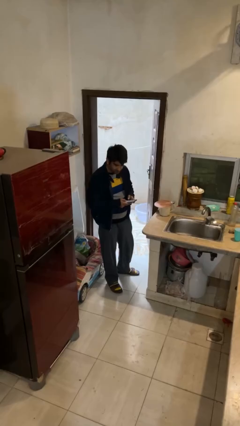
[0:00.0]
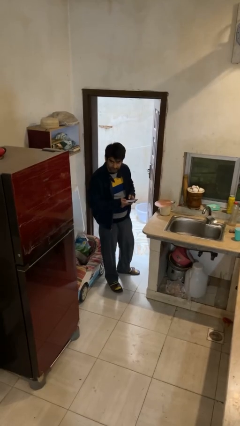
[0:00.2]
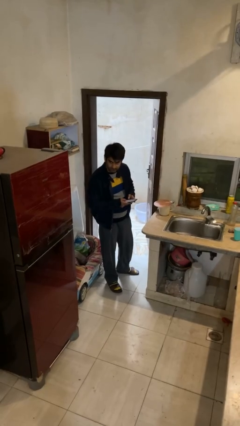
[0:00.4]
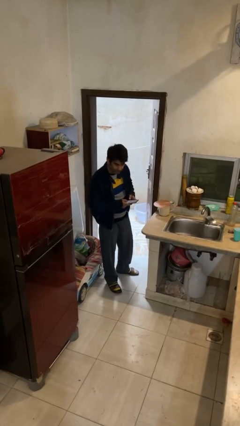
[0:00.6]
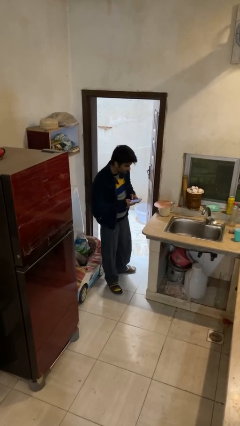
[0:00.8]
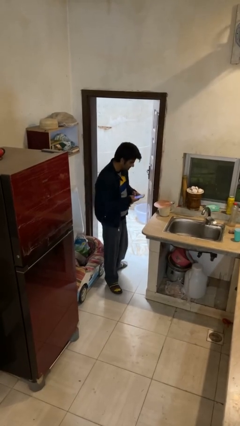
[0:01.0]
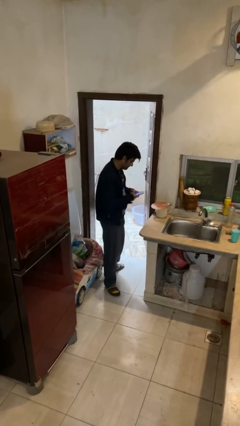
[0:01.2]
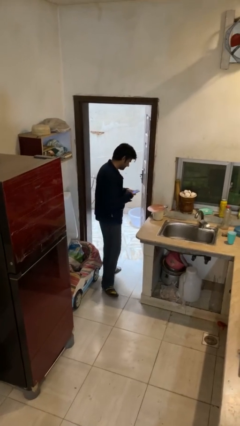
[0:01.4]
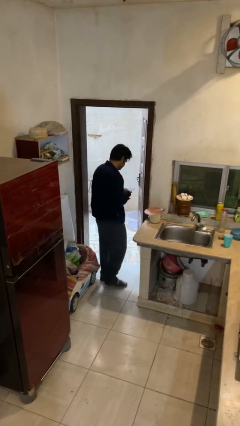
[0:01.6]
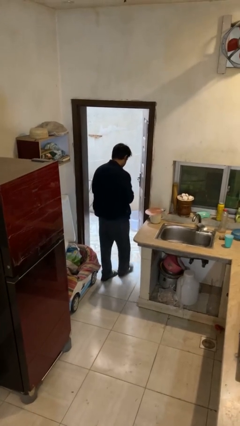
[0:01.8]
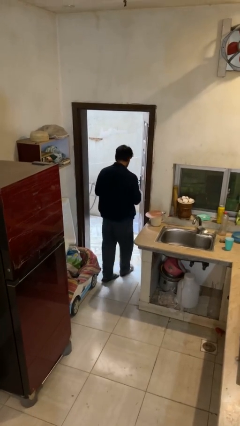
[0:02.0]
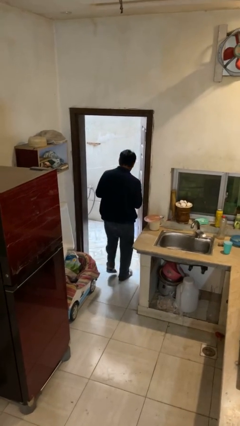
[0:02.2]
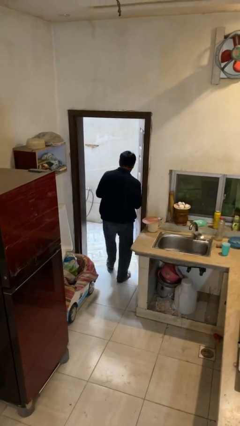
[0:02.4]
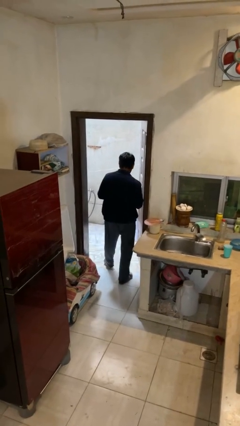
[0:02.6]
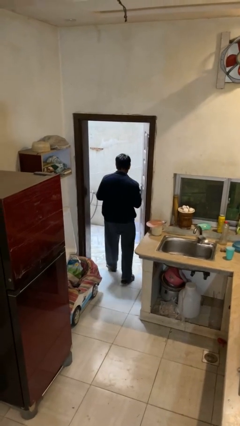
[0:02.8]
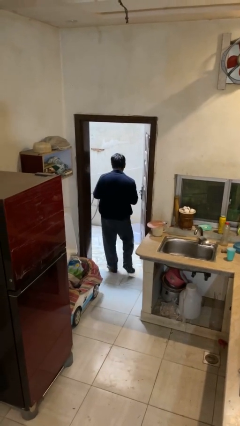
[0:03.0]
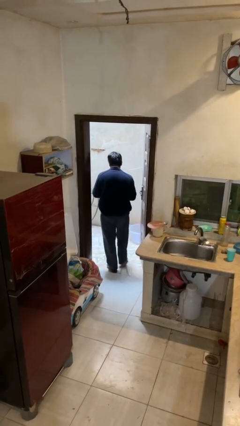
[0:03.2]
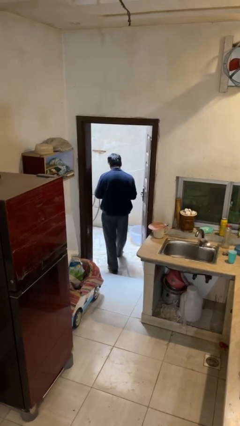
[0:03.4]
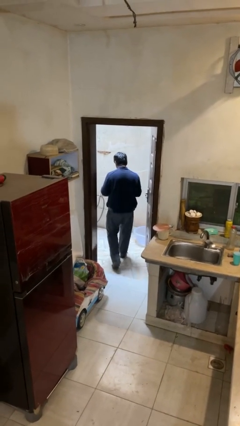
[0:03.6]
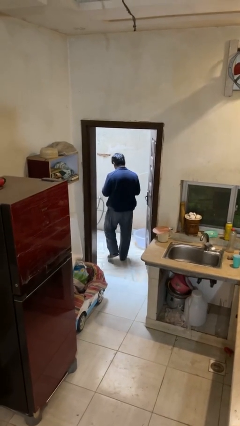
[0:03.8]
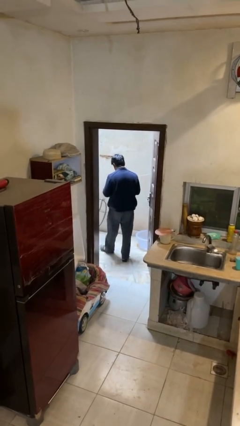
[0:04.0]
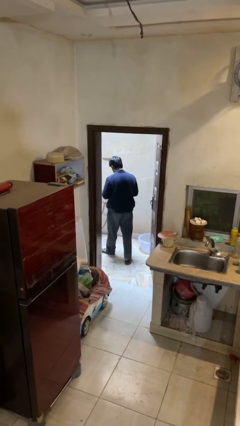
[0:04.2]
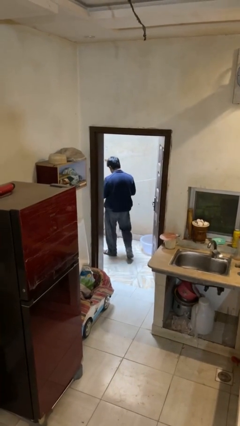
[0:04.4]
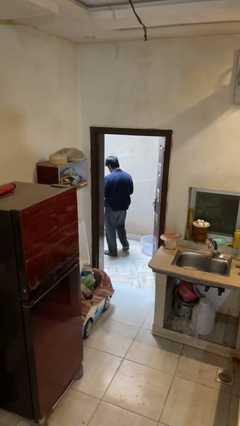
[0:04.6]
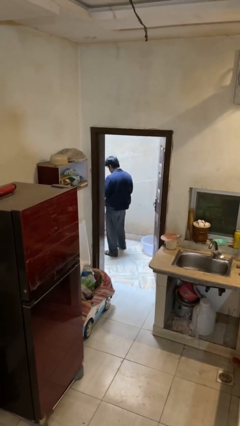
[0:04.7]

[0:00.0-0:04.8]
person exits scene through structure

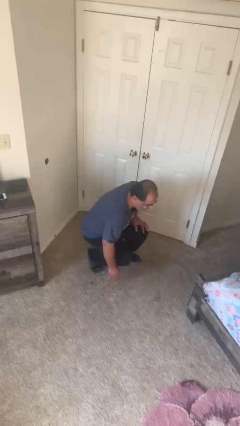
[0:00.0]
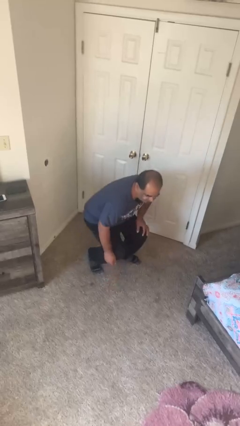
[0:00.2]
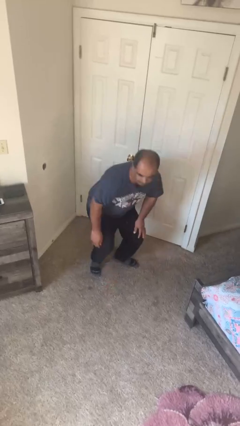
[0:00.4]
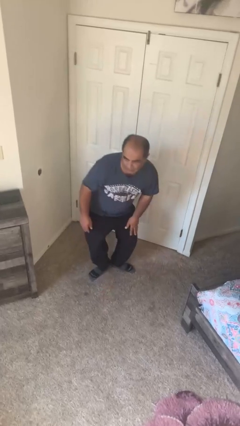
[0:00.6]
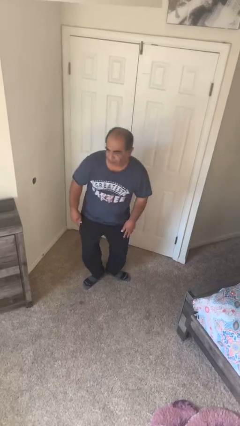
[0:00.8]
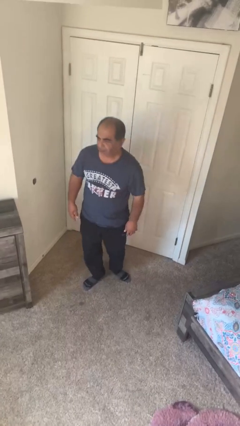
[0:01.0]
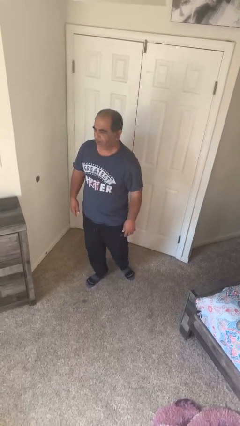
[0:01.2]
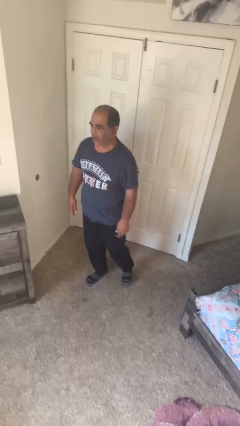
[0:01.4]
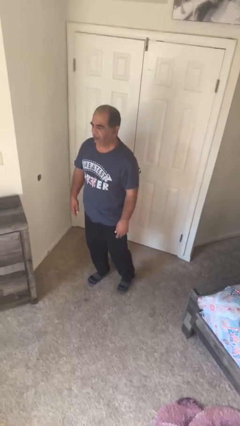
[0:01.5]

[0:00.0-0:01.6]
person stands up

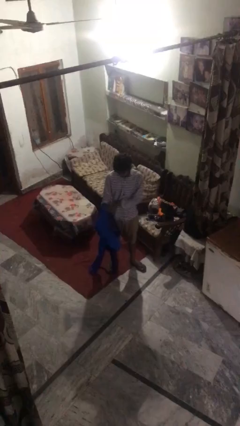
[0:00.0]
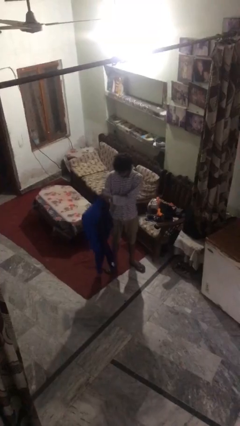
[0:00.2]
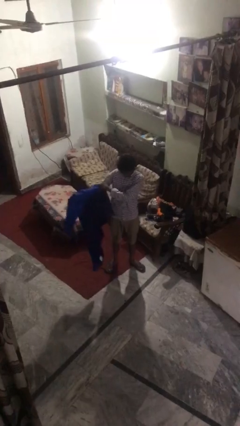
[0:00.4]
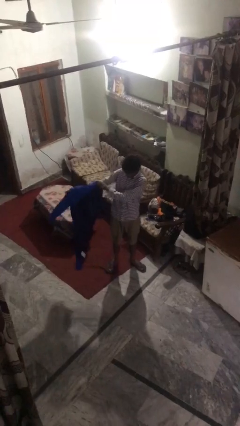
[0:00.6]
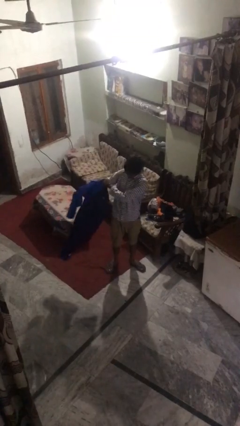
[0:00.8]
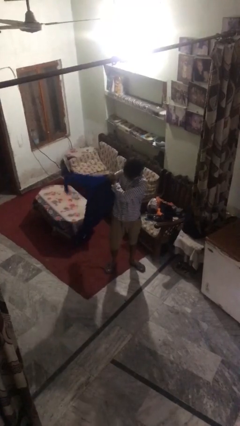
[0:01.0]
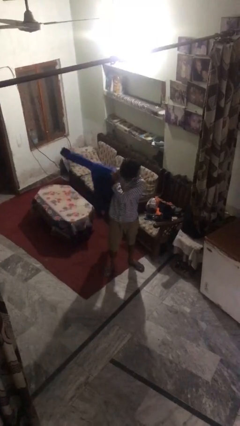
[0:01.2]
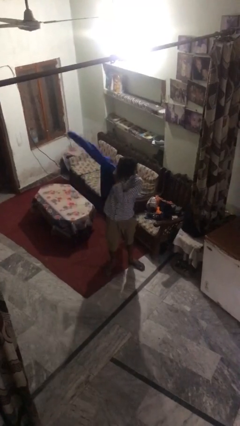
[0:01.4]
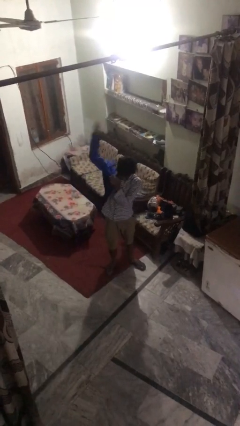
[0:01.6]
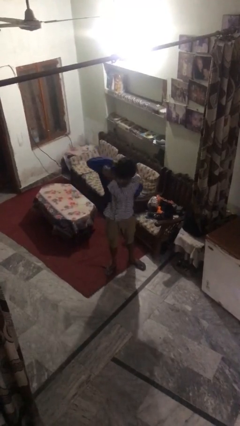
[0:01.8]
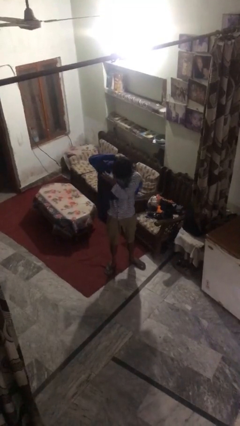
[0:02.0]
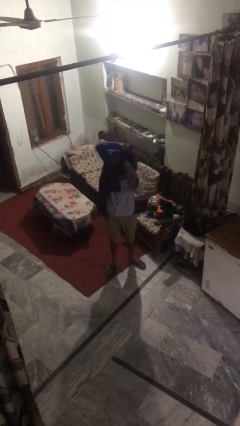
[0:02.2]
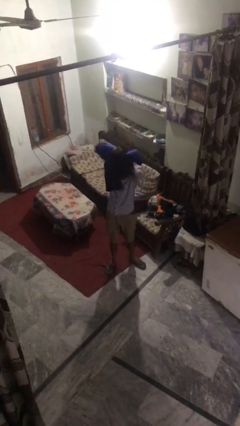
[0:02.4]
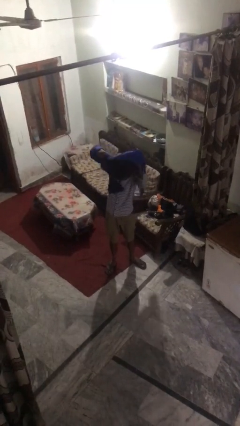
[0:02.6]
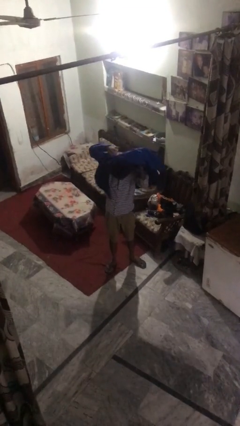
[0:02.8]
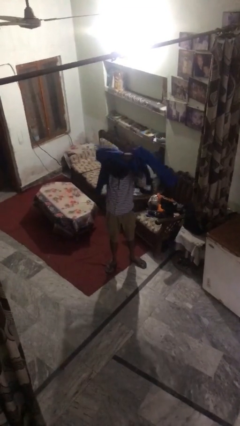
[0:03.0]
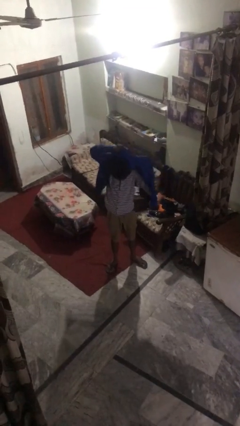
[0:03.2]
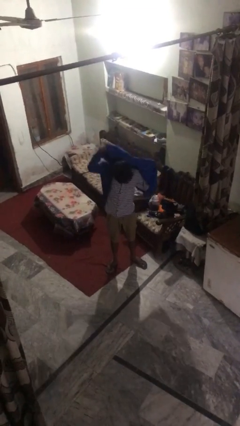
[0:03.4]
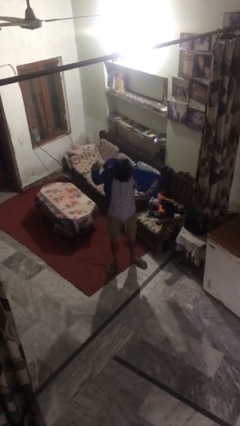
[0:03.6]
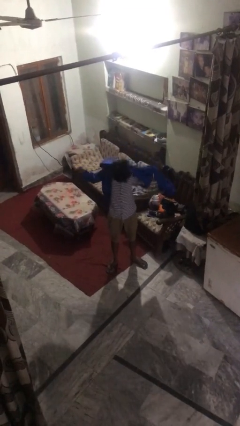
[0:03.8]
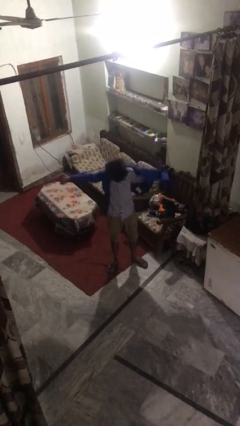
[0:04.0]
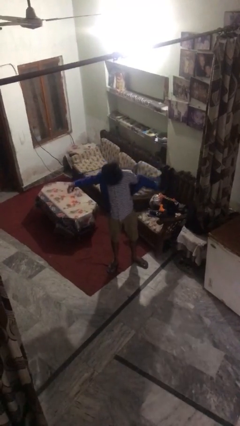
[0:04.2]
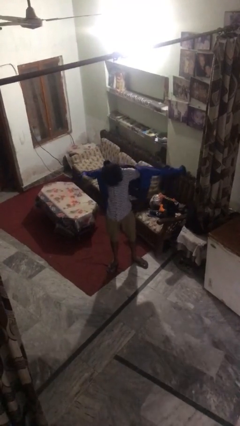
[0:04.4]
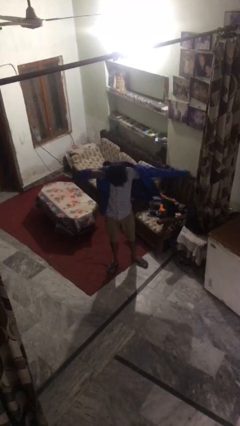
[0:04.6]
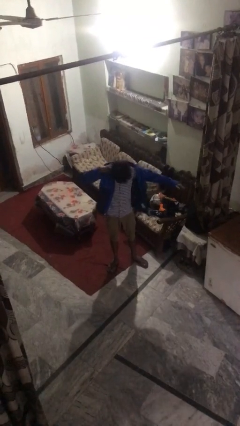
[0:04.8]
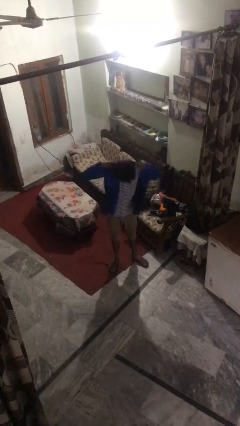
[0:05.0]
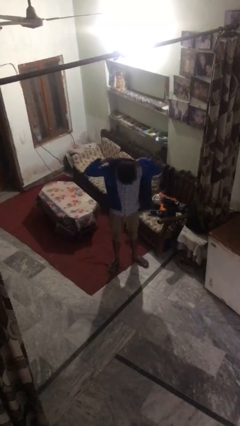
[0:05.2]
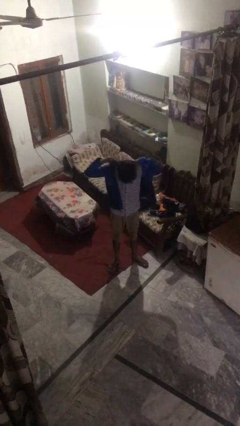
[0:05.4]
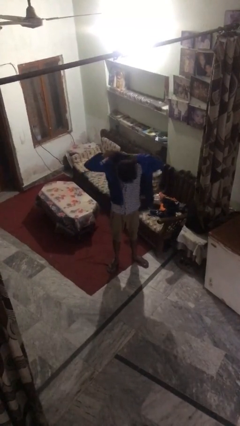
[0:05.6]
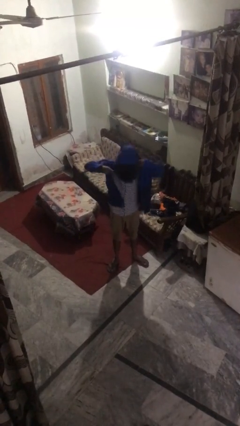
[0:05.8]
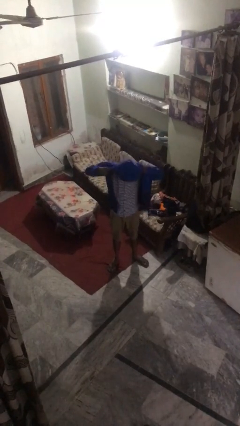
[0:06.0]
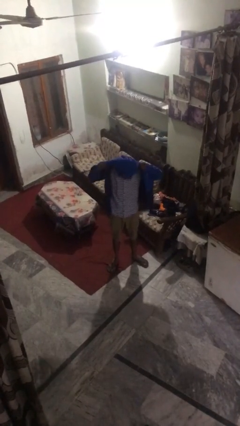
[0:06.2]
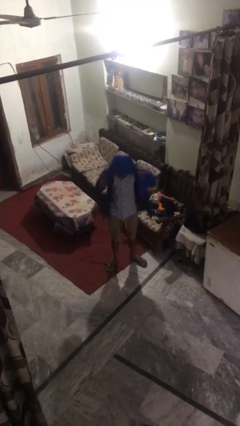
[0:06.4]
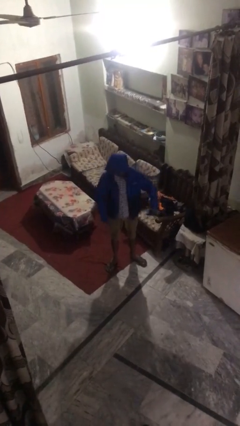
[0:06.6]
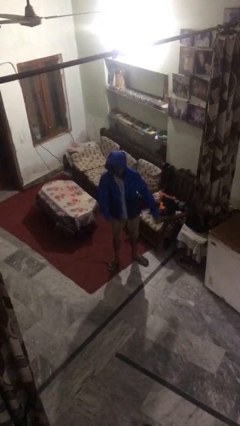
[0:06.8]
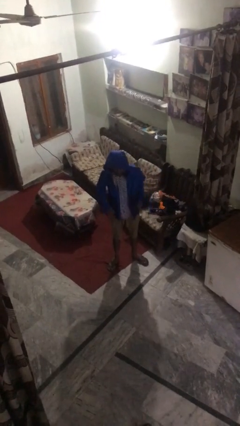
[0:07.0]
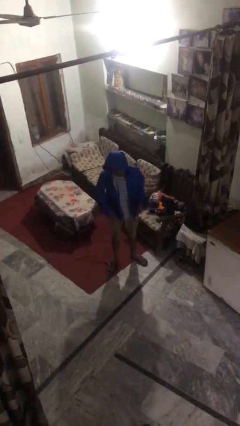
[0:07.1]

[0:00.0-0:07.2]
person puts on hoodie

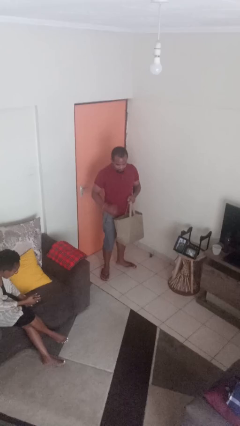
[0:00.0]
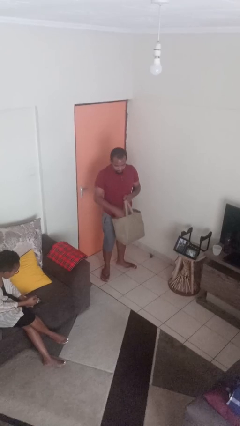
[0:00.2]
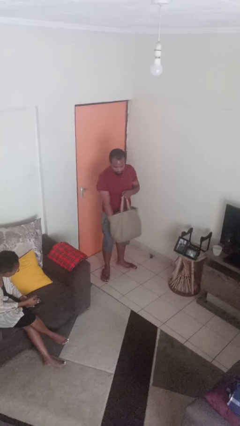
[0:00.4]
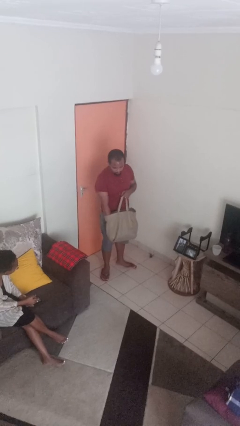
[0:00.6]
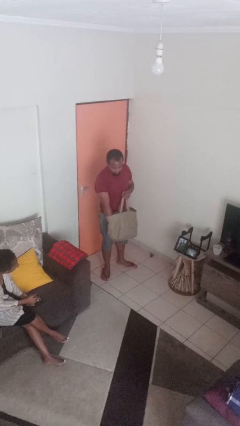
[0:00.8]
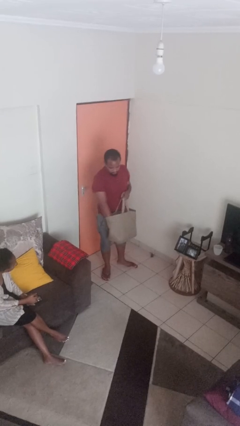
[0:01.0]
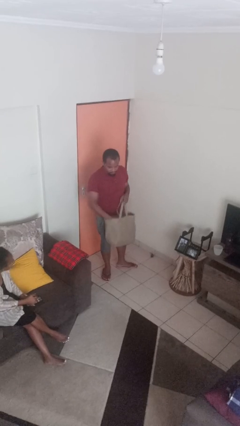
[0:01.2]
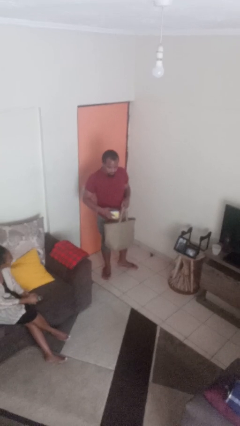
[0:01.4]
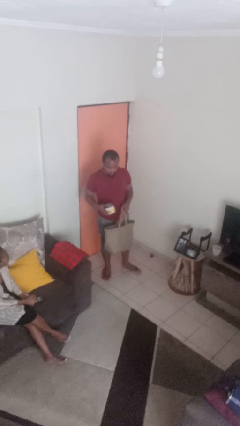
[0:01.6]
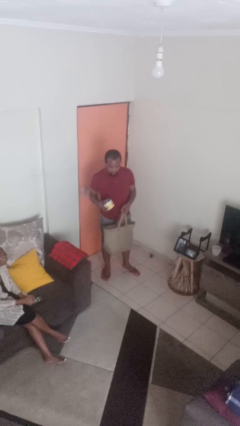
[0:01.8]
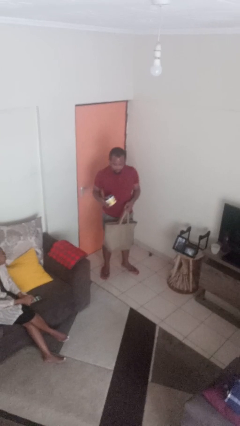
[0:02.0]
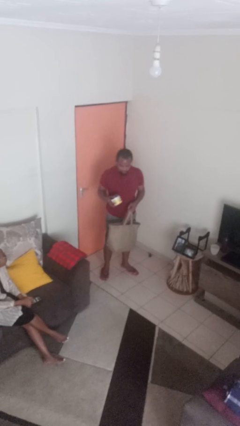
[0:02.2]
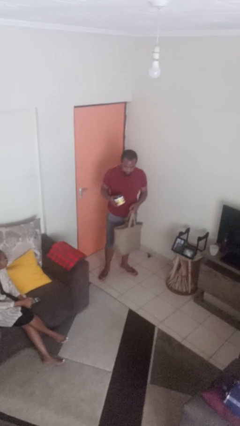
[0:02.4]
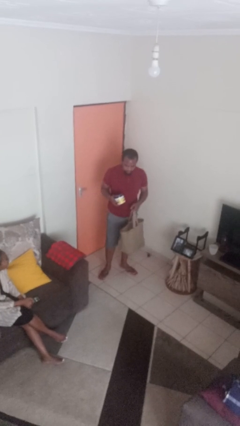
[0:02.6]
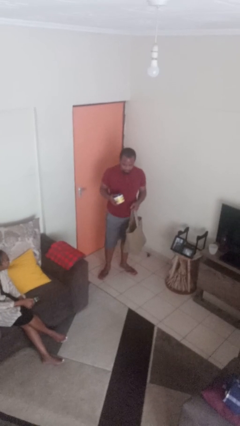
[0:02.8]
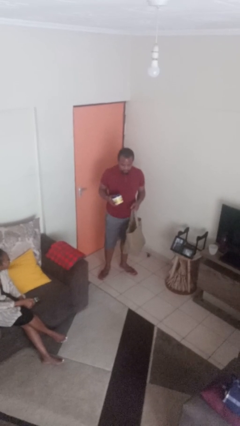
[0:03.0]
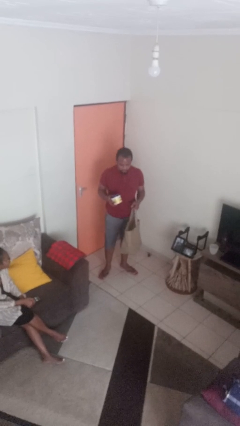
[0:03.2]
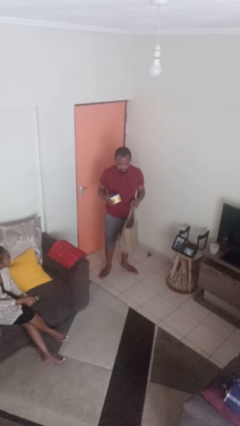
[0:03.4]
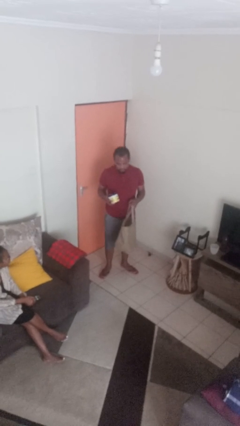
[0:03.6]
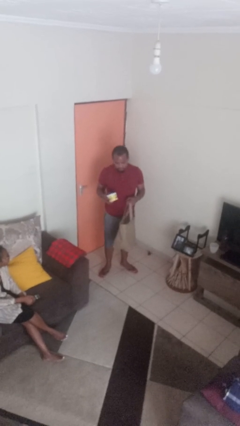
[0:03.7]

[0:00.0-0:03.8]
person takes object from bag

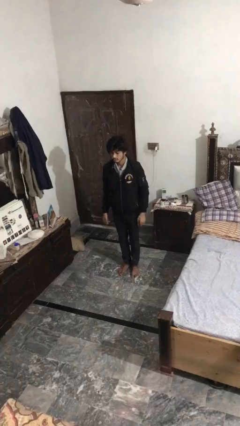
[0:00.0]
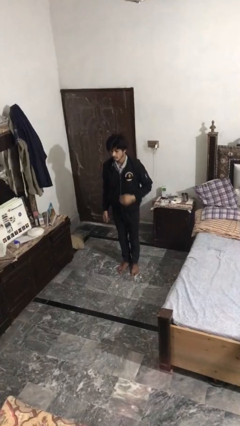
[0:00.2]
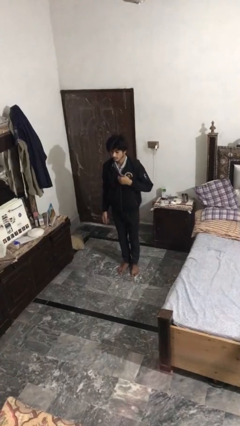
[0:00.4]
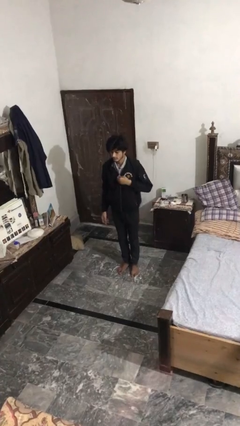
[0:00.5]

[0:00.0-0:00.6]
person unzips jacket
